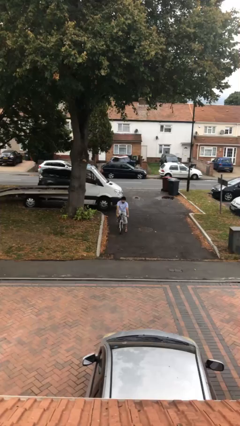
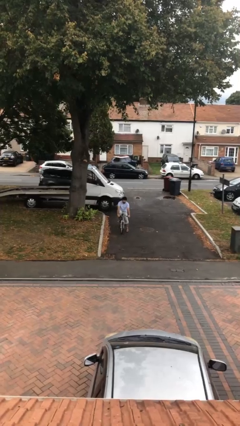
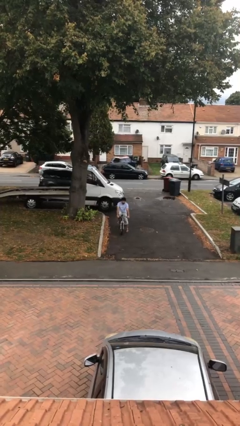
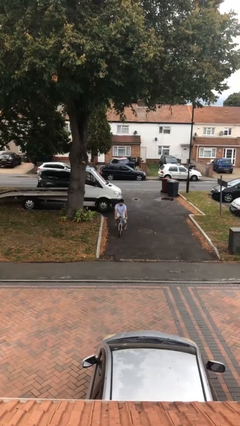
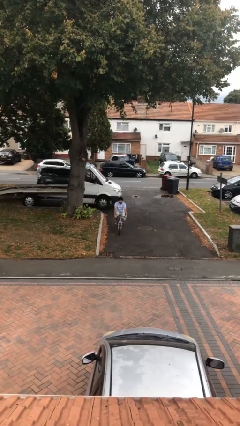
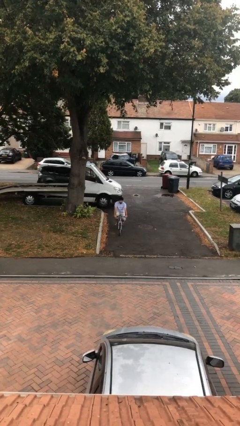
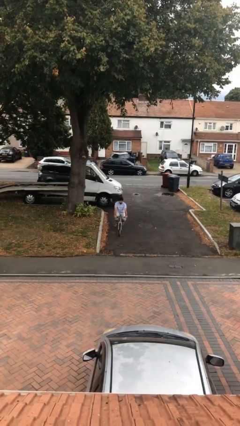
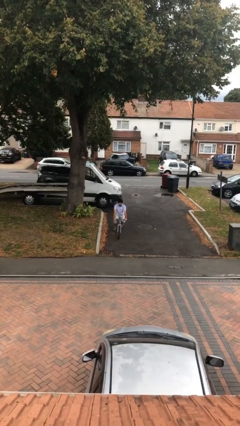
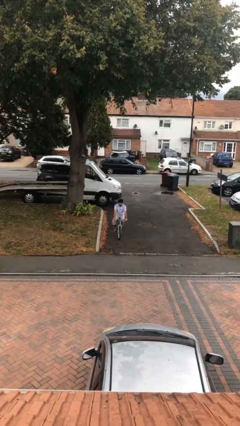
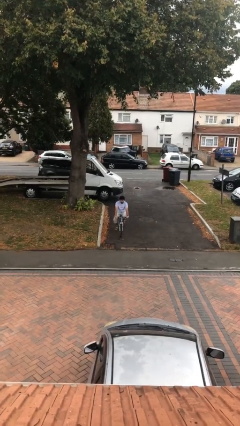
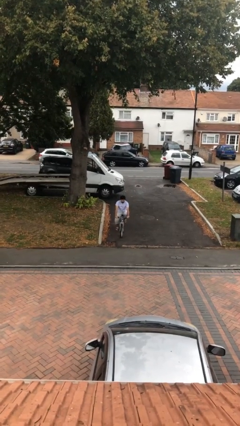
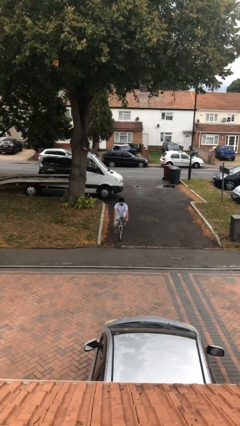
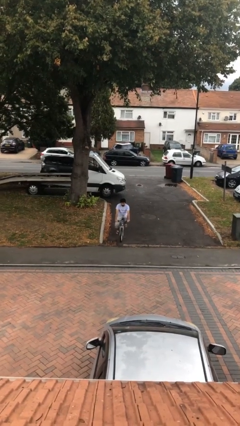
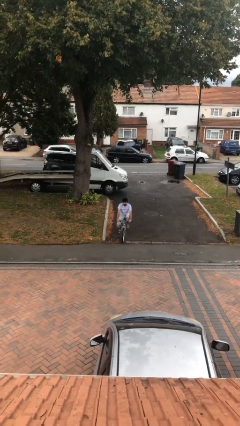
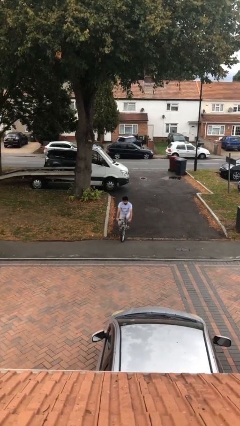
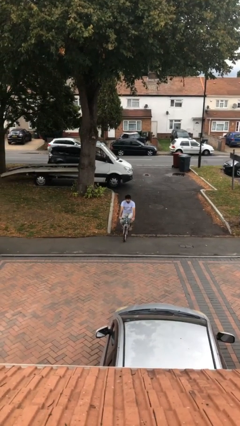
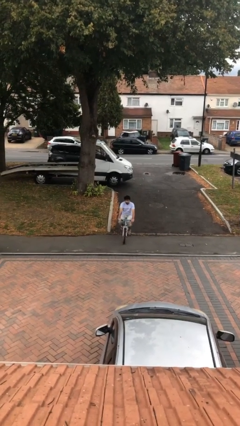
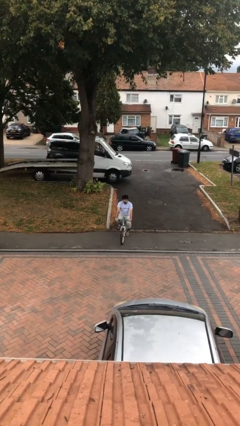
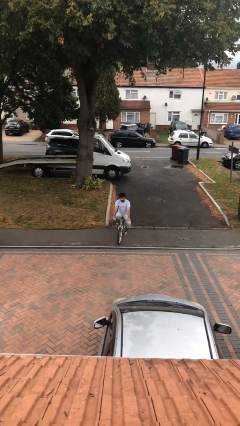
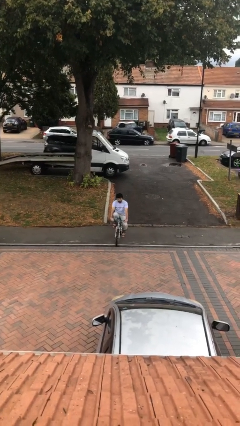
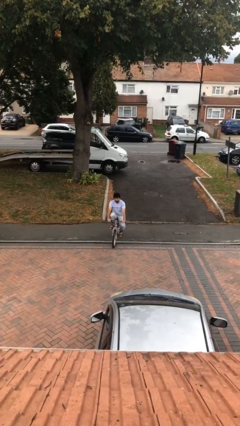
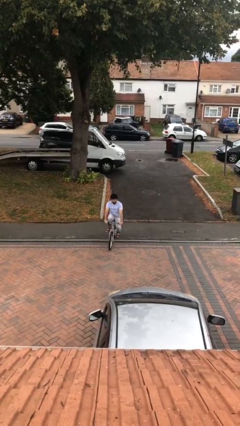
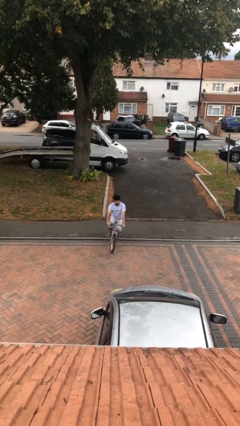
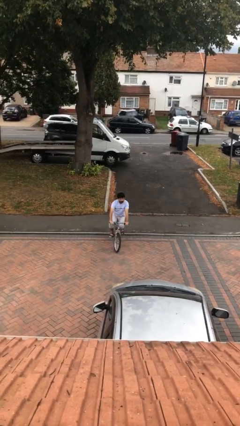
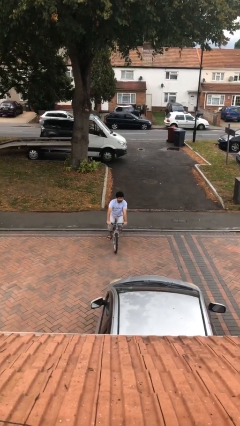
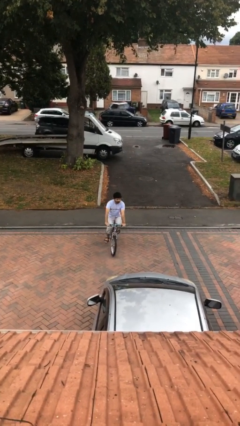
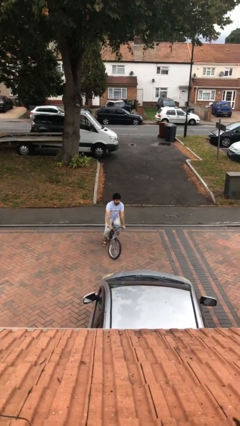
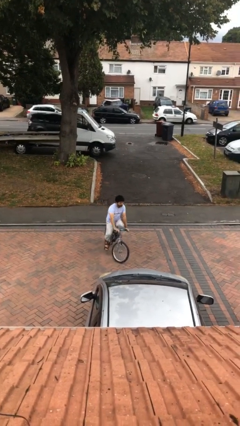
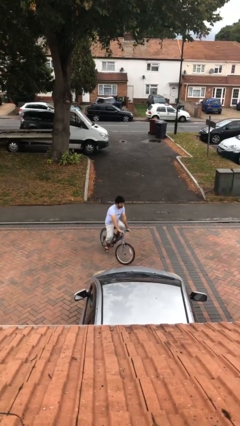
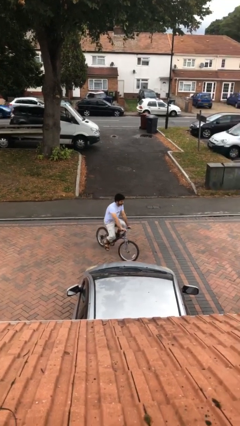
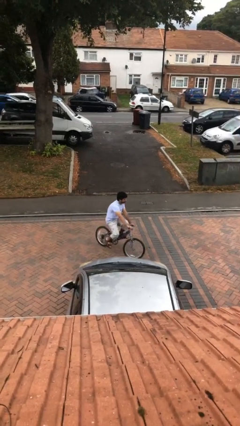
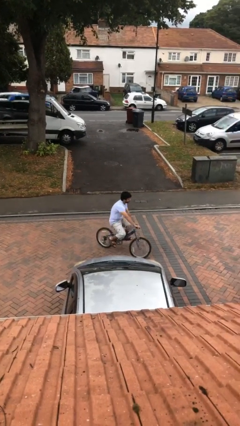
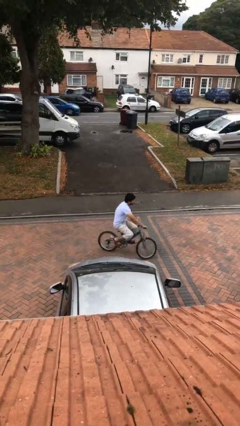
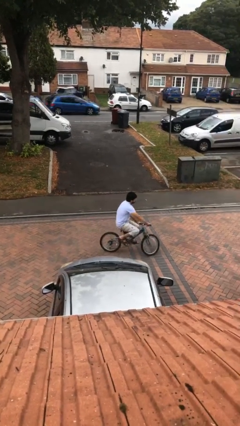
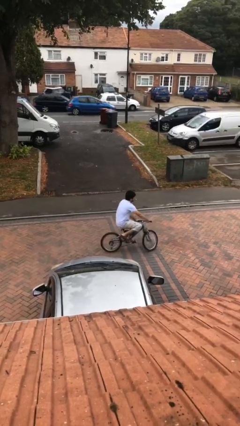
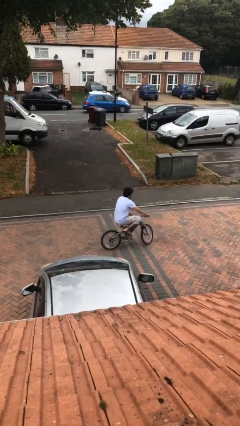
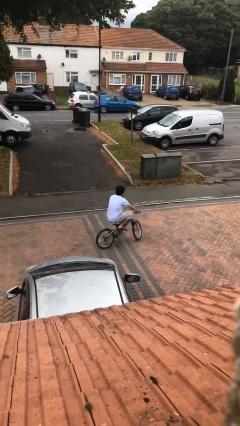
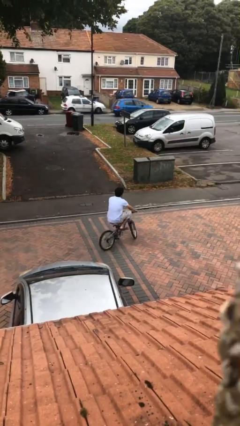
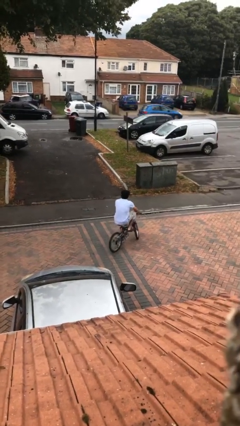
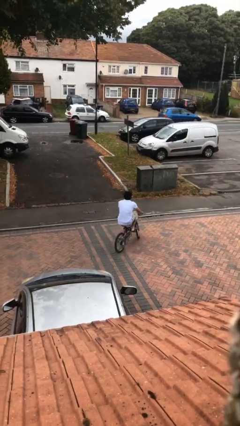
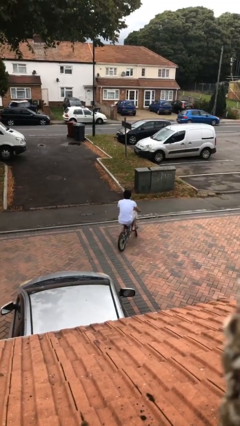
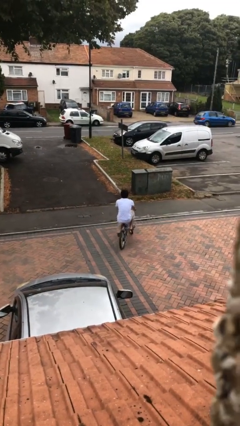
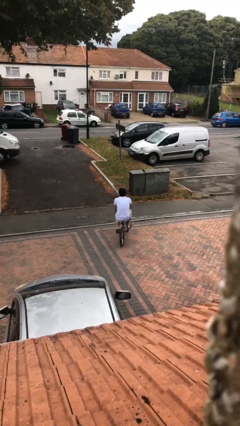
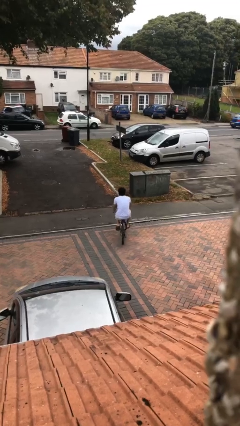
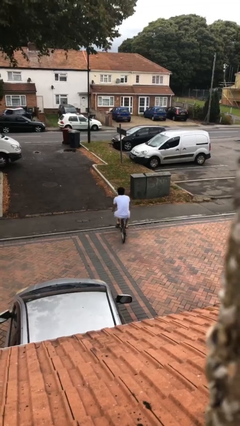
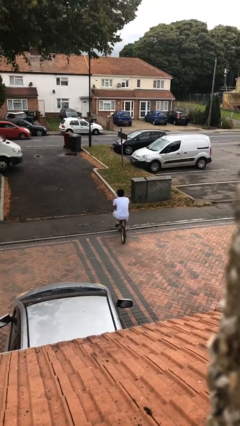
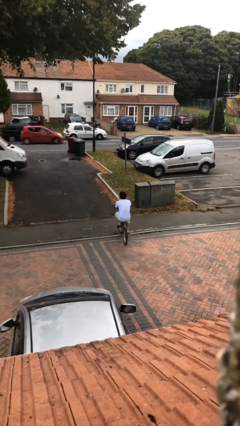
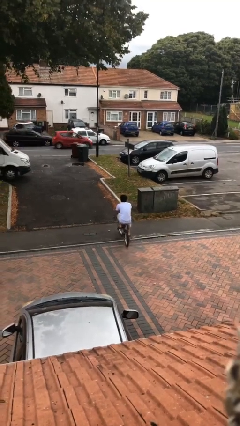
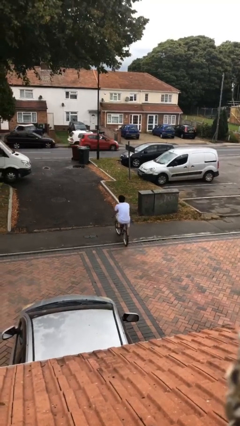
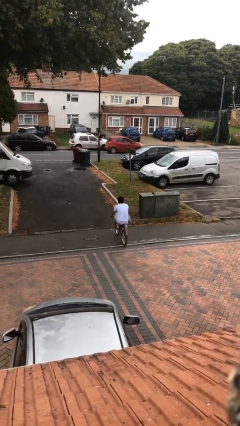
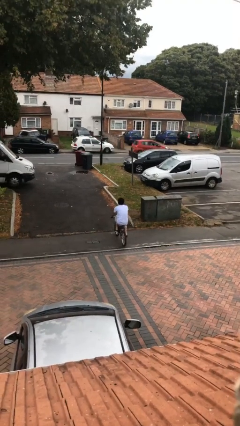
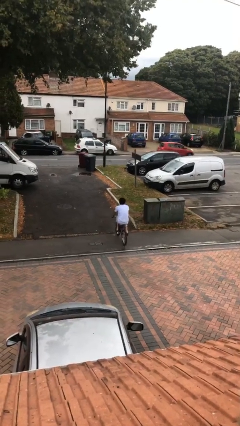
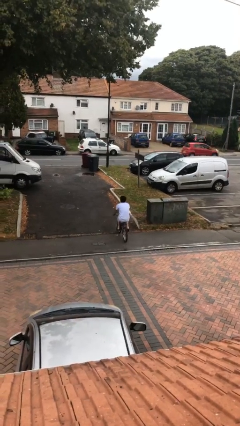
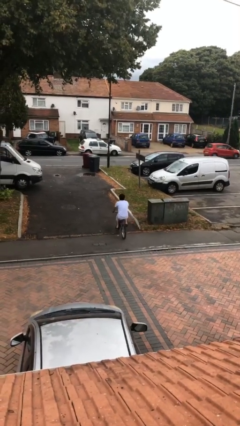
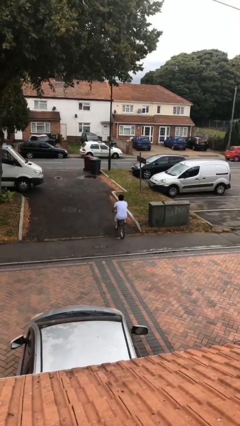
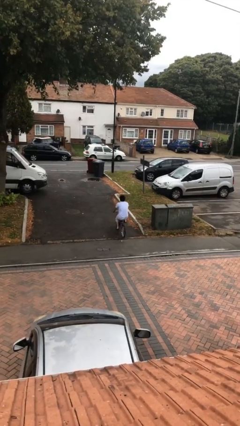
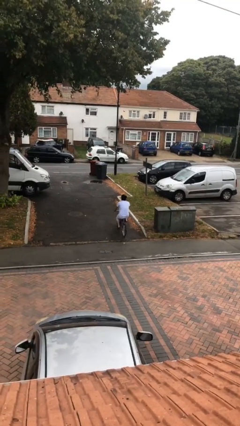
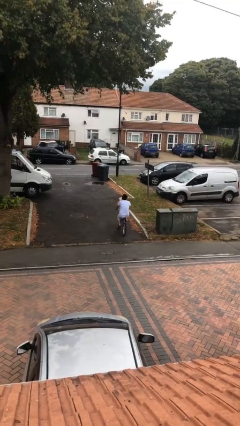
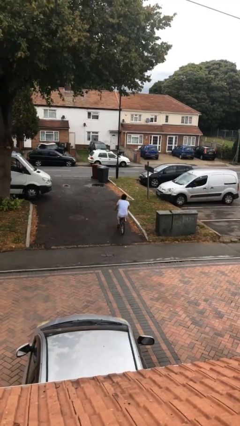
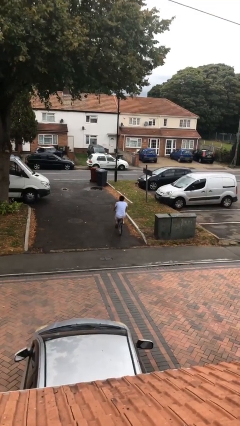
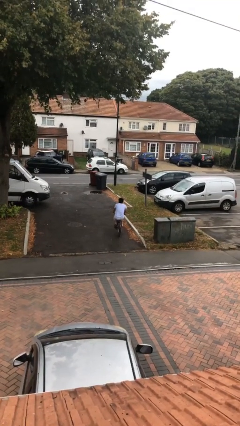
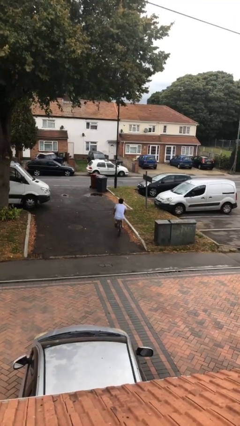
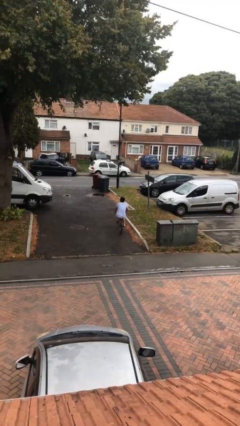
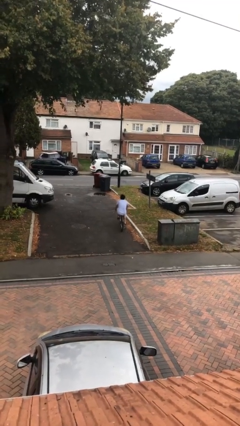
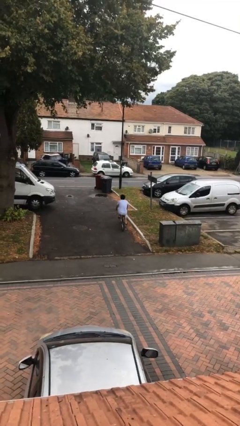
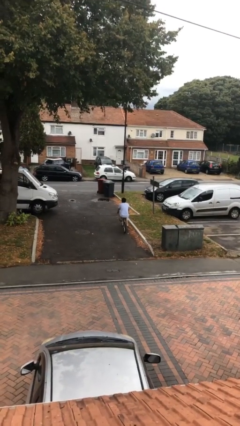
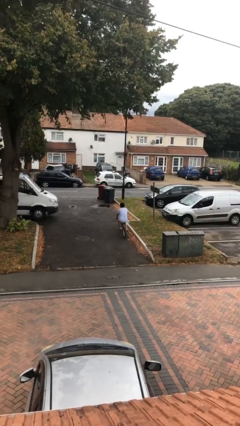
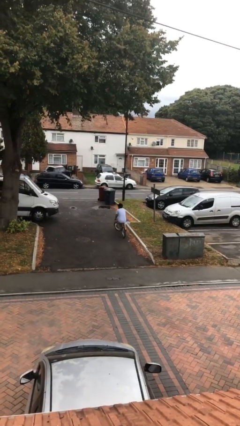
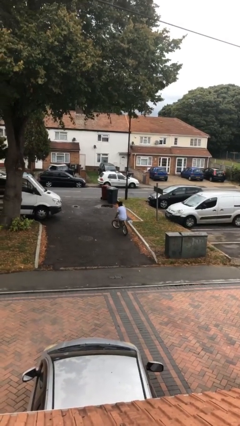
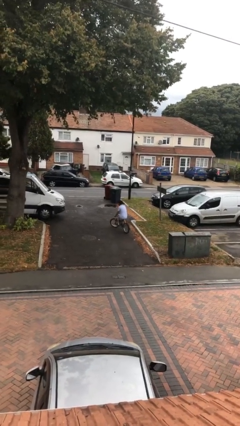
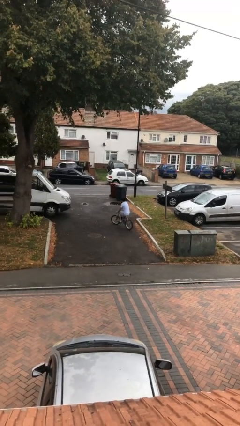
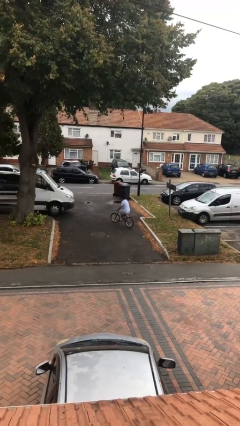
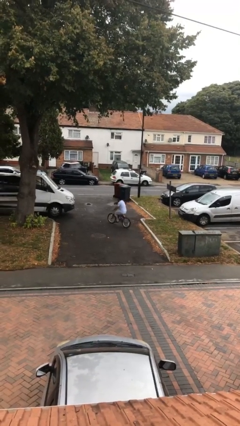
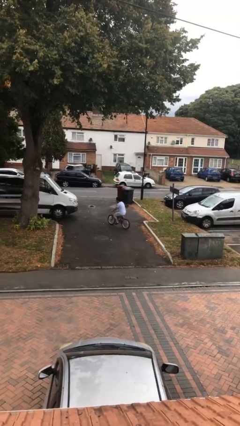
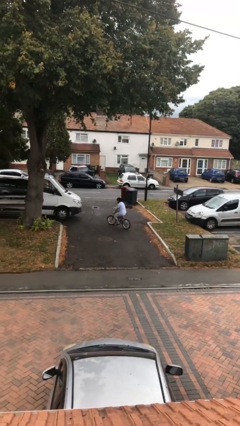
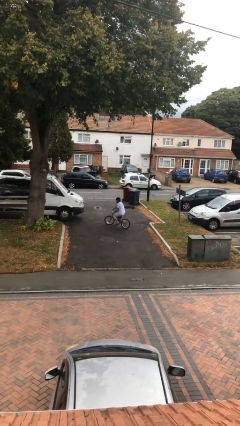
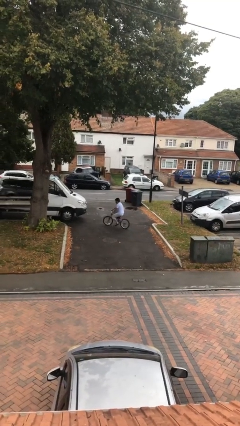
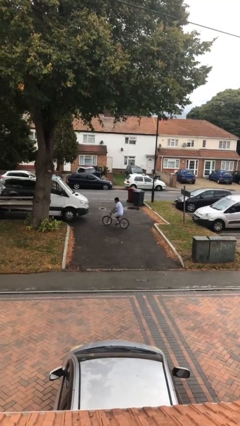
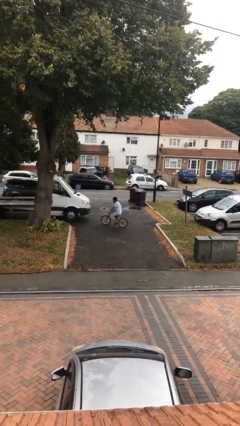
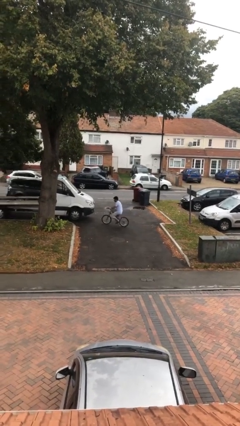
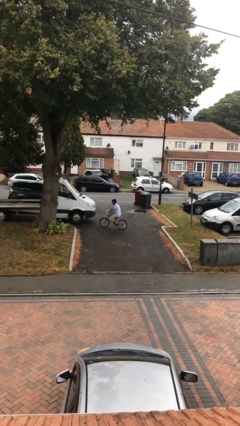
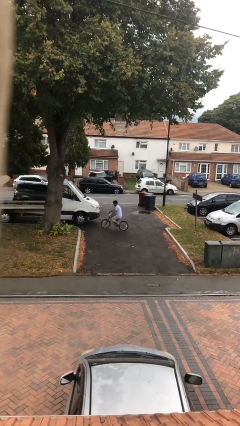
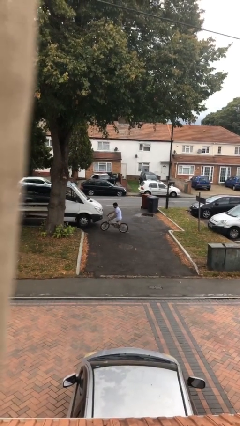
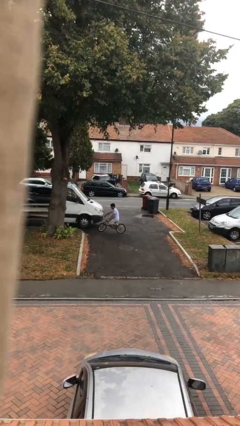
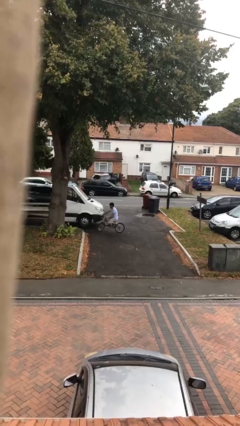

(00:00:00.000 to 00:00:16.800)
person rides bicycle

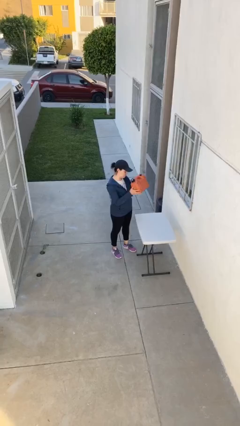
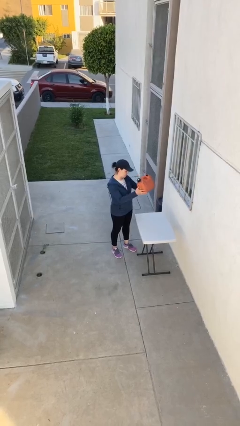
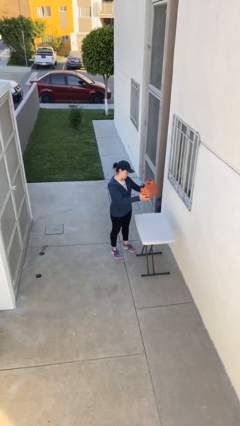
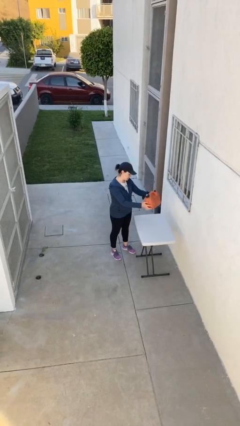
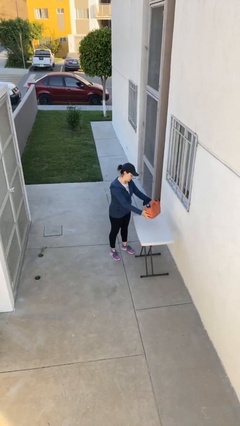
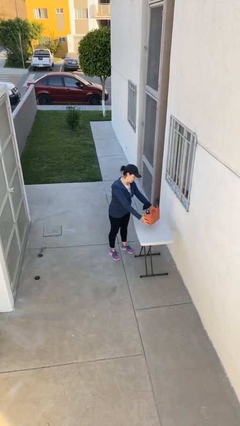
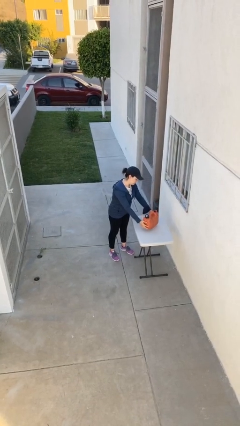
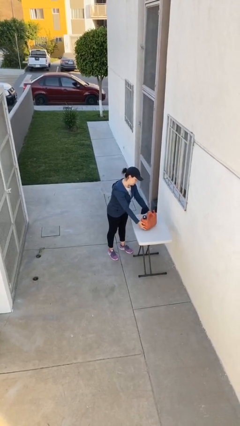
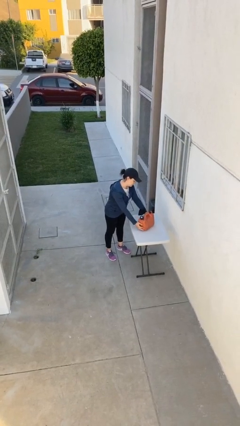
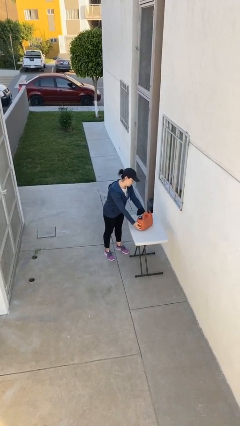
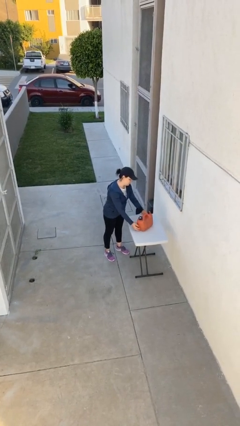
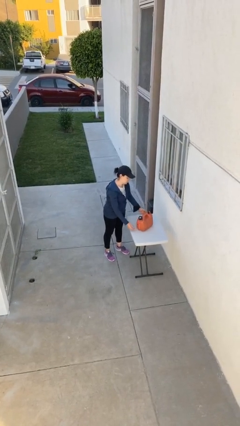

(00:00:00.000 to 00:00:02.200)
person puts down object on table
